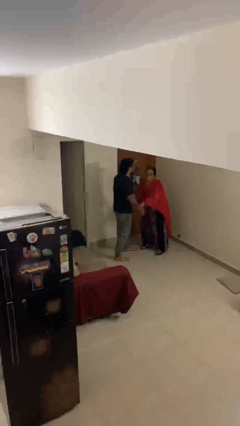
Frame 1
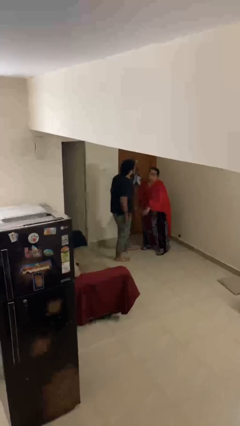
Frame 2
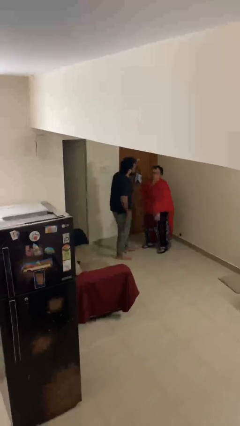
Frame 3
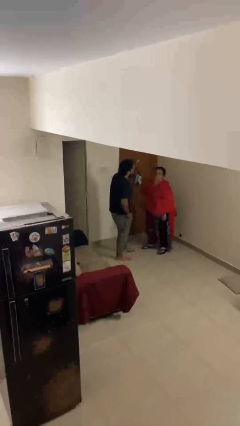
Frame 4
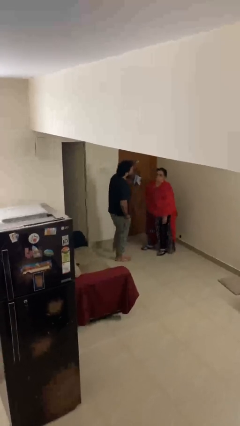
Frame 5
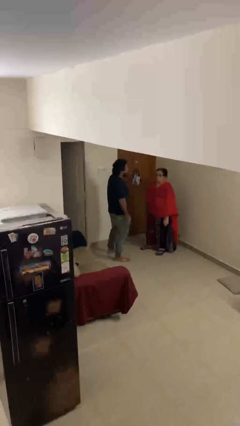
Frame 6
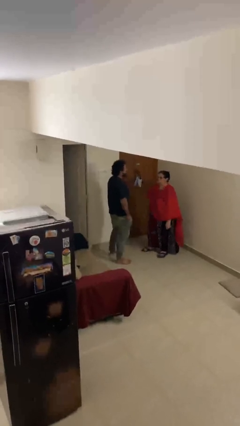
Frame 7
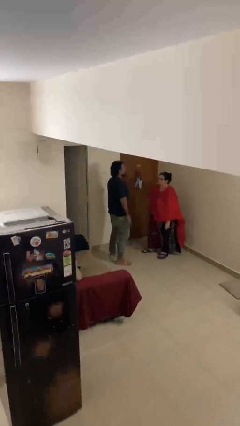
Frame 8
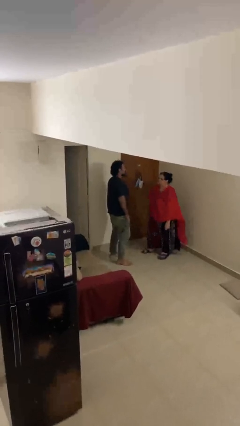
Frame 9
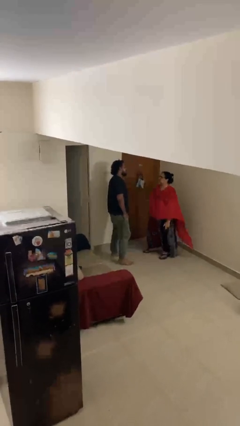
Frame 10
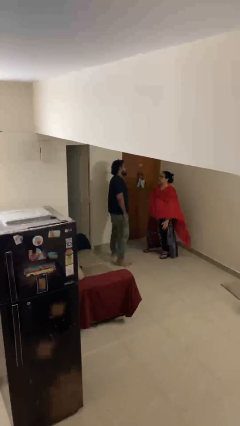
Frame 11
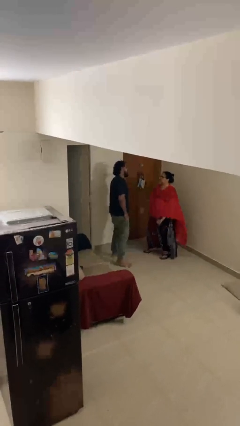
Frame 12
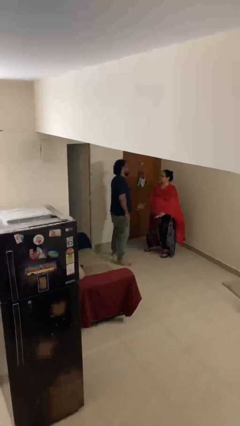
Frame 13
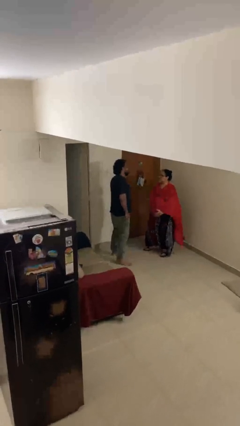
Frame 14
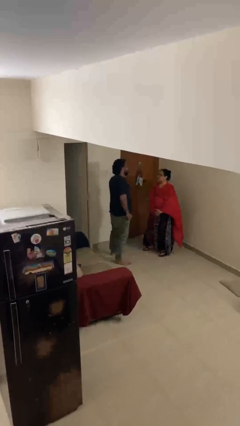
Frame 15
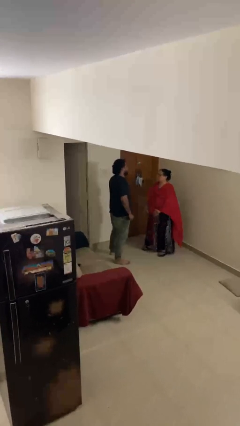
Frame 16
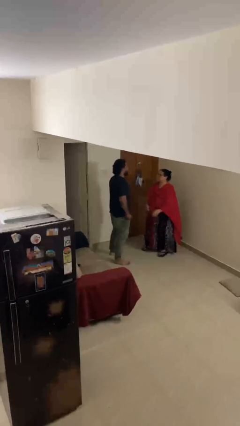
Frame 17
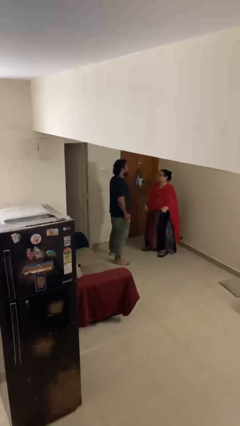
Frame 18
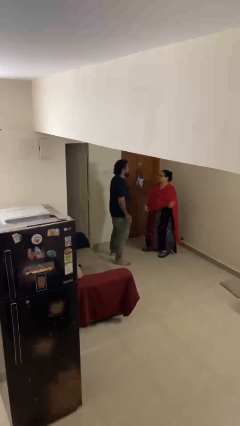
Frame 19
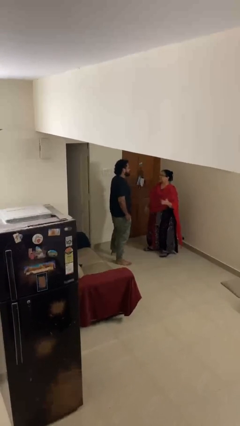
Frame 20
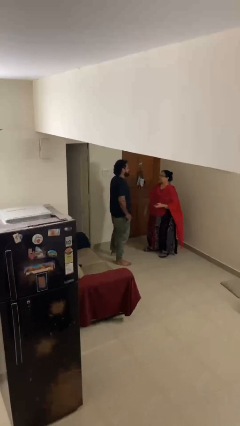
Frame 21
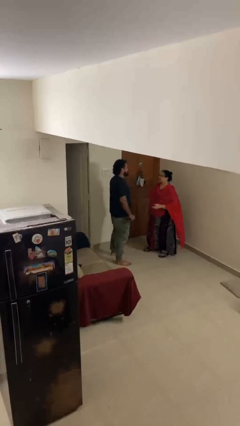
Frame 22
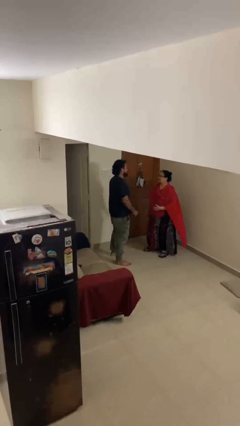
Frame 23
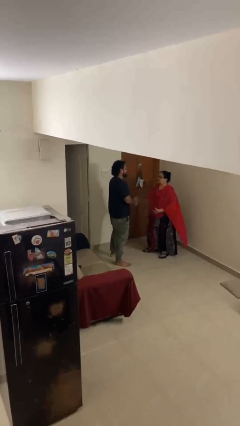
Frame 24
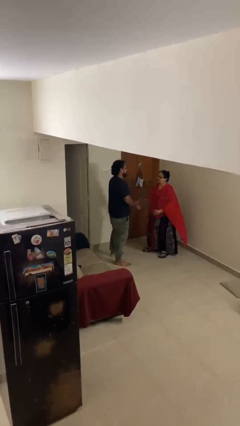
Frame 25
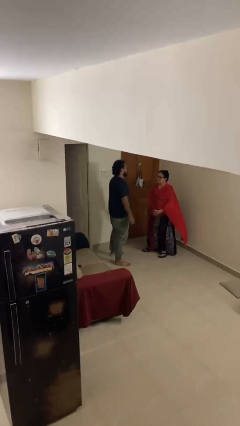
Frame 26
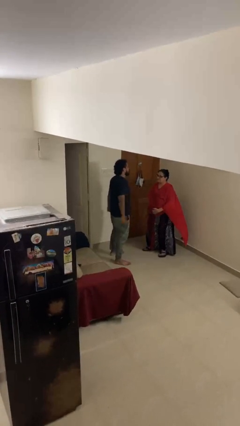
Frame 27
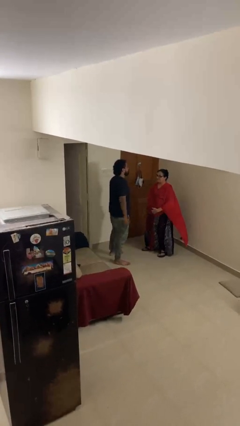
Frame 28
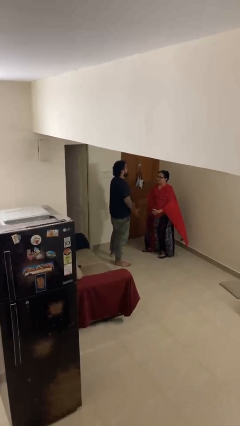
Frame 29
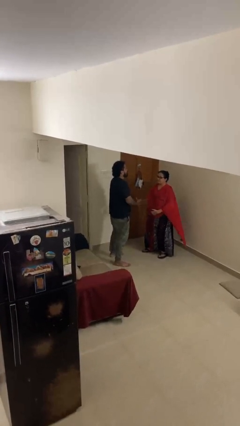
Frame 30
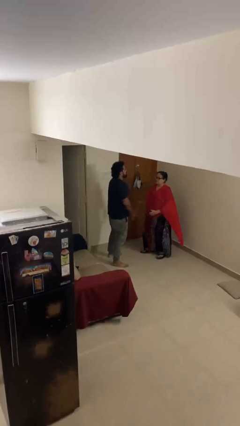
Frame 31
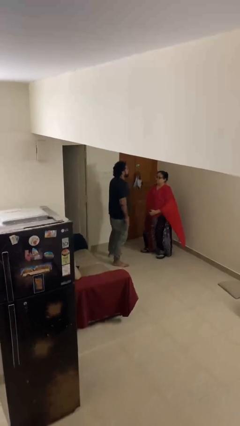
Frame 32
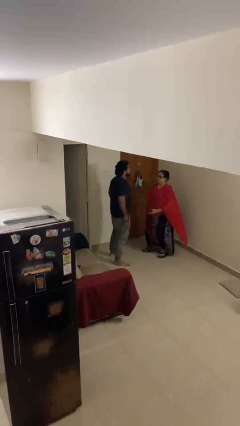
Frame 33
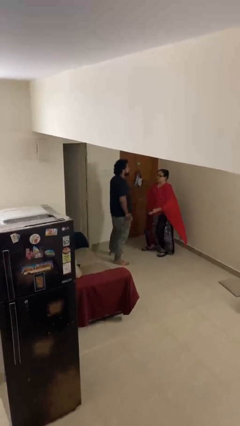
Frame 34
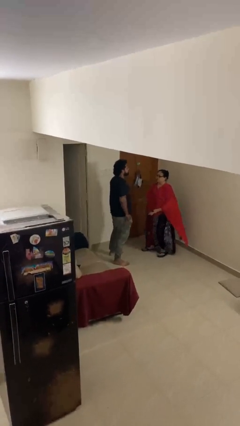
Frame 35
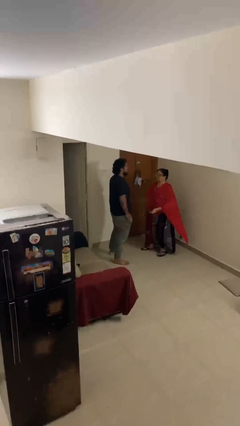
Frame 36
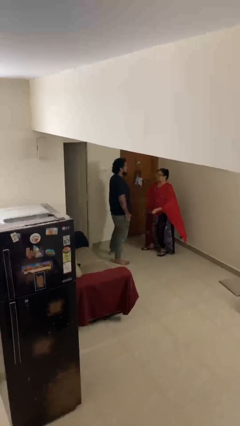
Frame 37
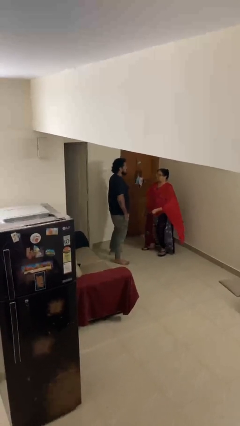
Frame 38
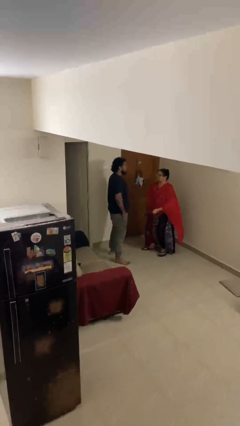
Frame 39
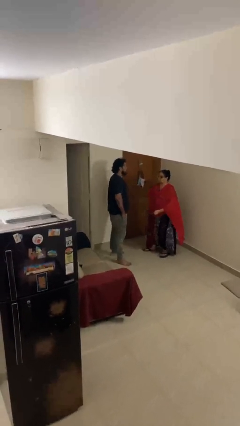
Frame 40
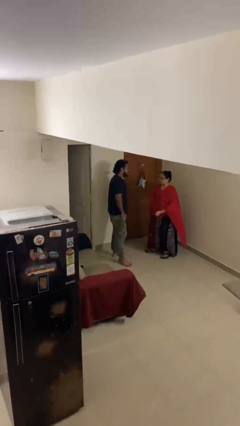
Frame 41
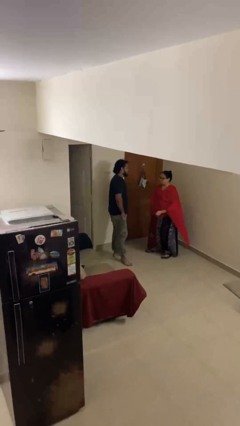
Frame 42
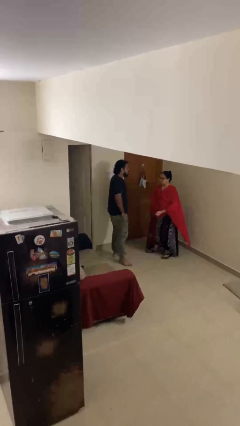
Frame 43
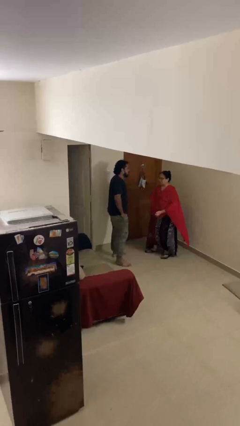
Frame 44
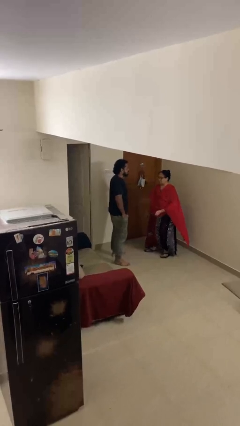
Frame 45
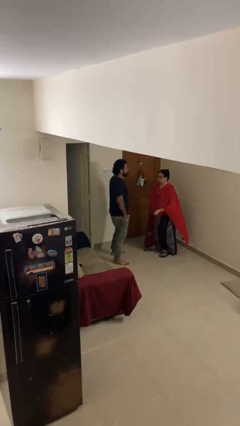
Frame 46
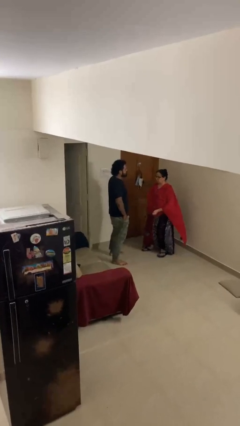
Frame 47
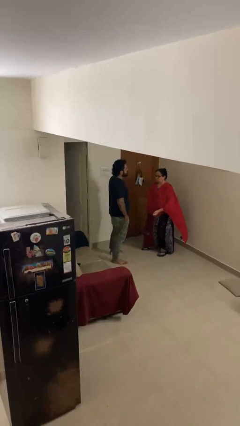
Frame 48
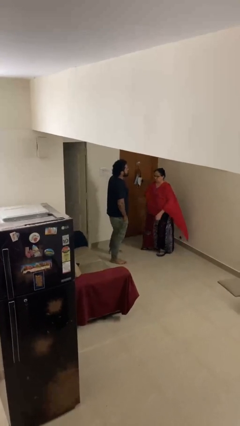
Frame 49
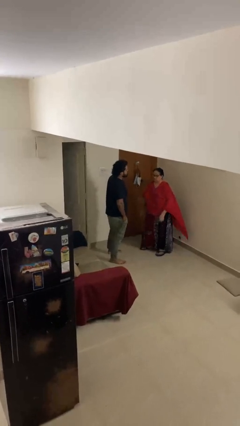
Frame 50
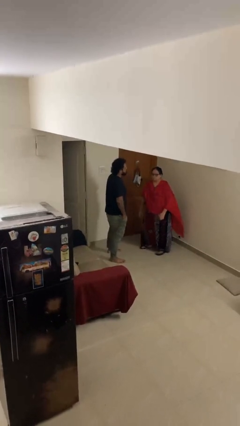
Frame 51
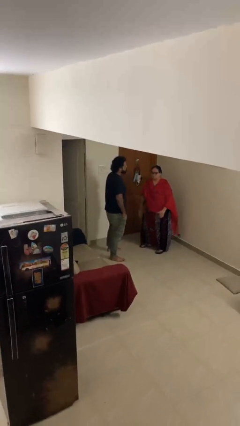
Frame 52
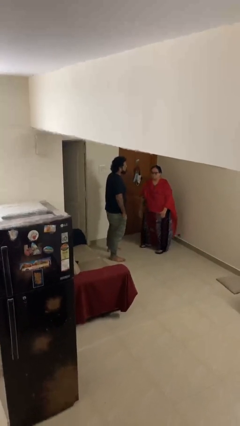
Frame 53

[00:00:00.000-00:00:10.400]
person talks to person

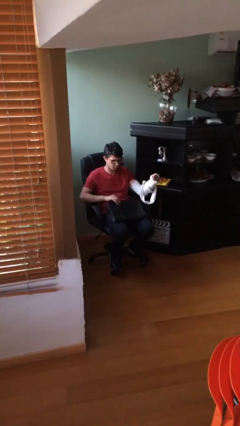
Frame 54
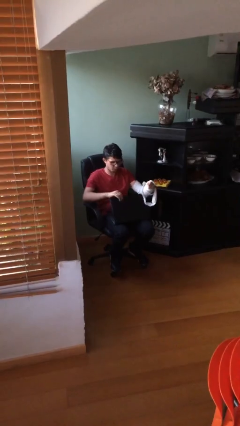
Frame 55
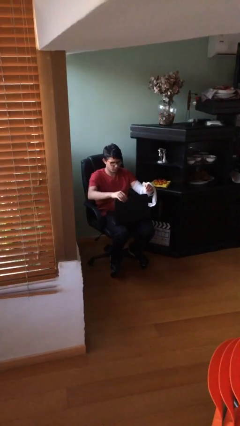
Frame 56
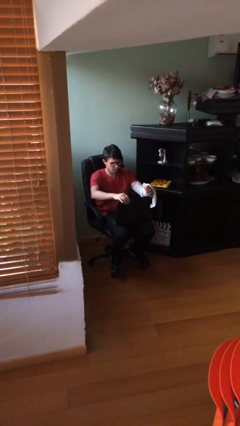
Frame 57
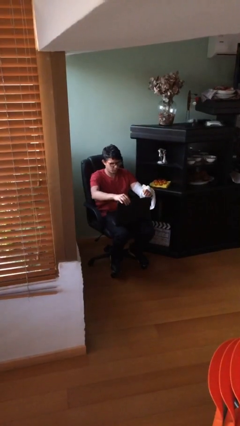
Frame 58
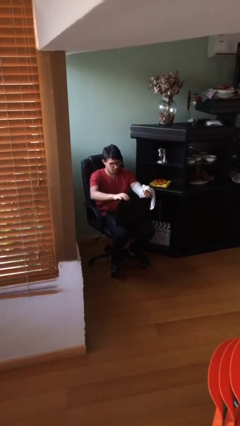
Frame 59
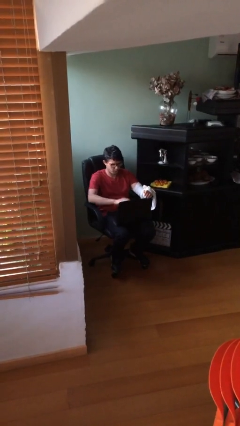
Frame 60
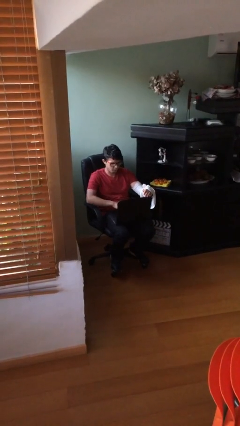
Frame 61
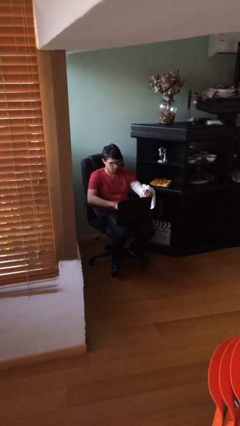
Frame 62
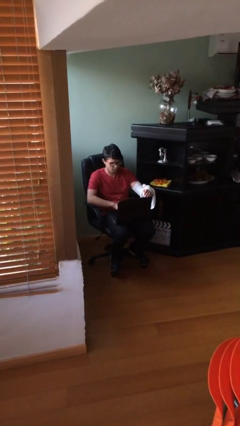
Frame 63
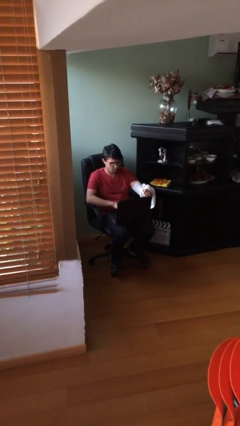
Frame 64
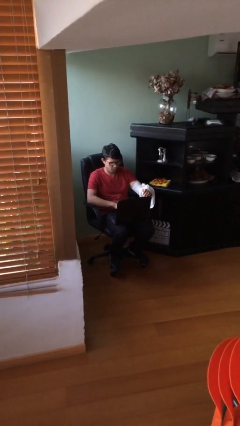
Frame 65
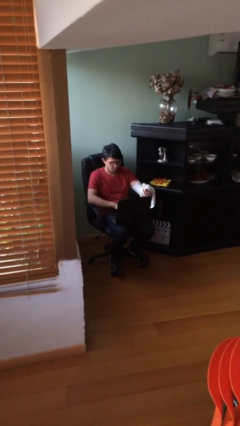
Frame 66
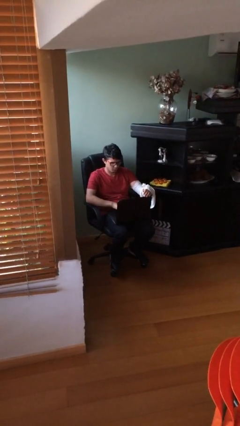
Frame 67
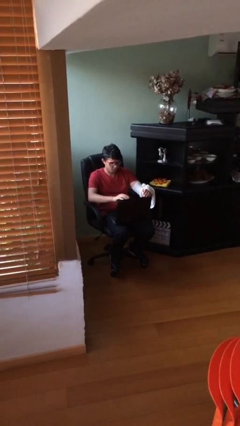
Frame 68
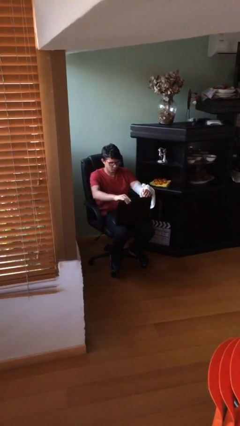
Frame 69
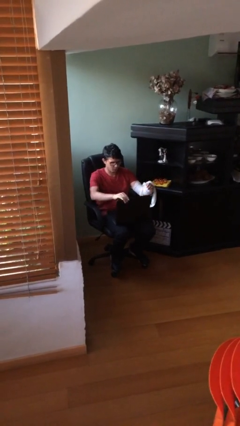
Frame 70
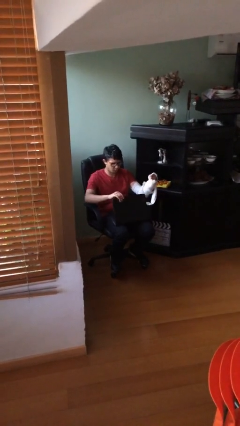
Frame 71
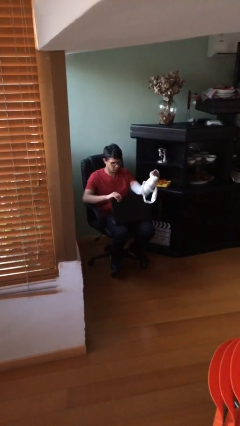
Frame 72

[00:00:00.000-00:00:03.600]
person interacts with laptop

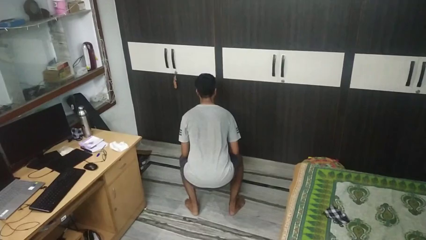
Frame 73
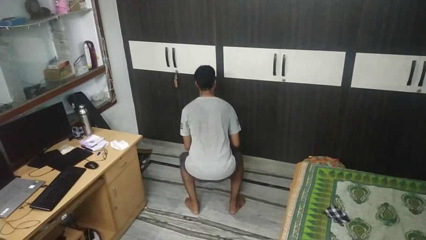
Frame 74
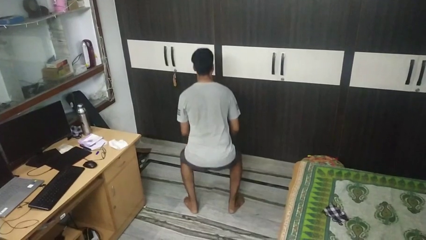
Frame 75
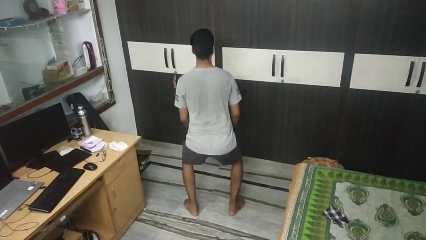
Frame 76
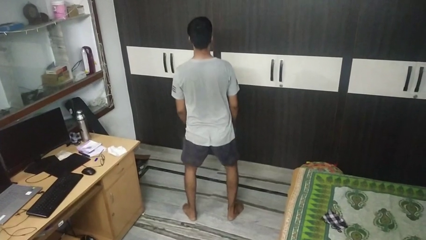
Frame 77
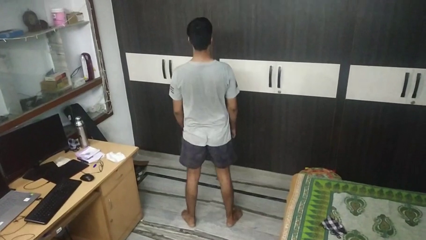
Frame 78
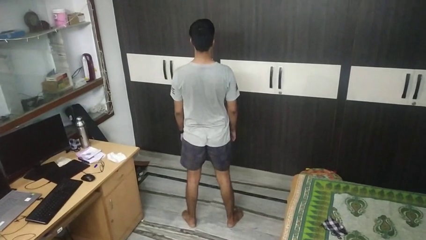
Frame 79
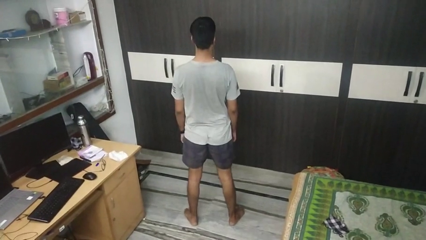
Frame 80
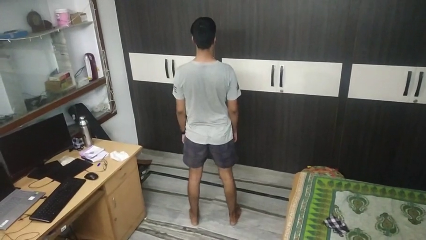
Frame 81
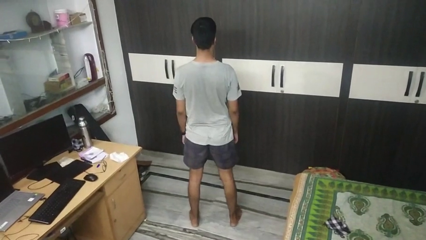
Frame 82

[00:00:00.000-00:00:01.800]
person stands up

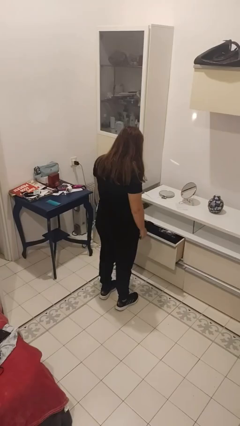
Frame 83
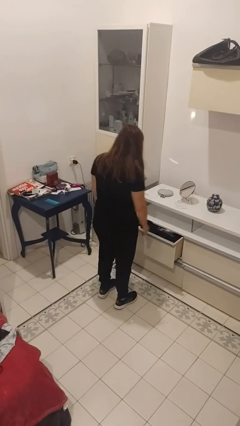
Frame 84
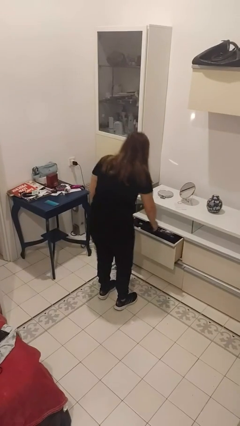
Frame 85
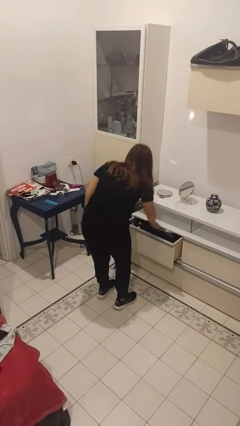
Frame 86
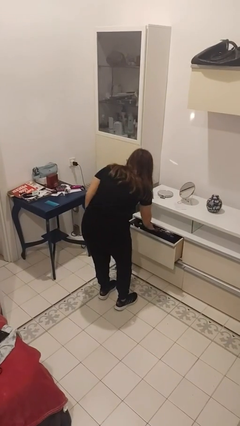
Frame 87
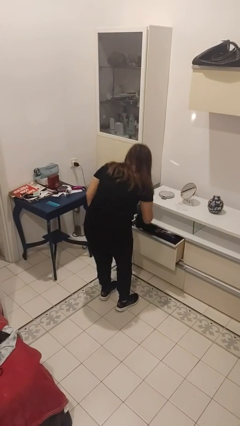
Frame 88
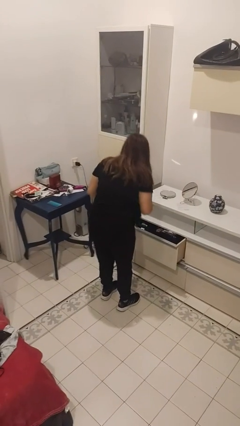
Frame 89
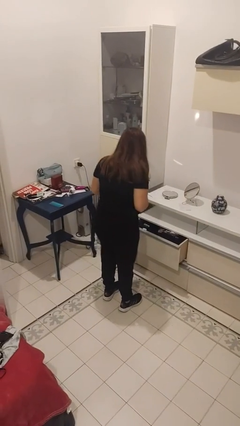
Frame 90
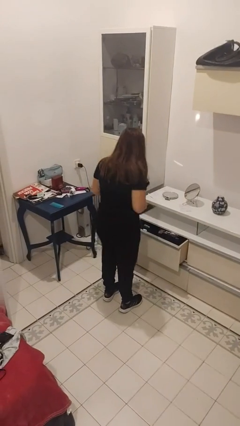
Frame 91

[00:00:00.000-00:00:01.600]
person takes clothes from dresser

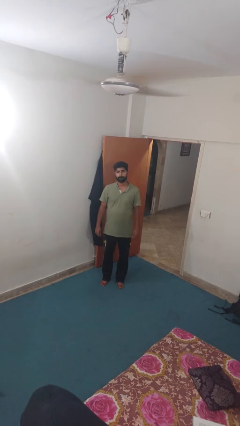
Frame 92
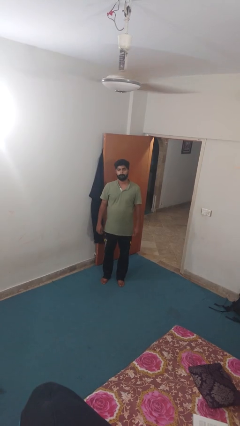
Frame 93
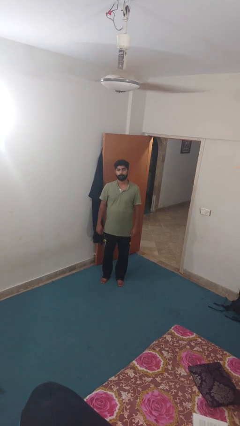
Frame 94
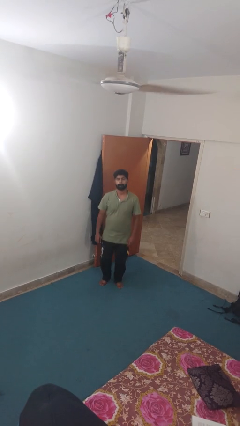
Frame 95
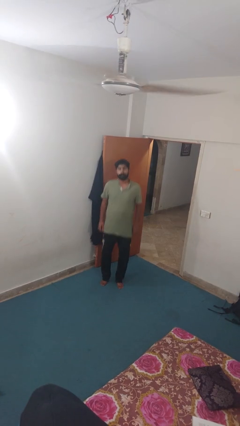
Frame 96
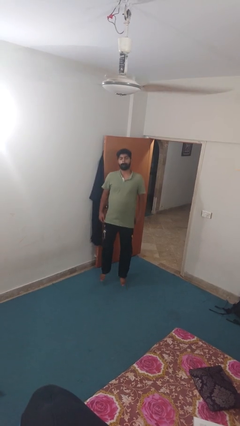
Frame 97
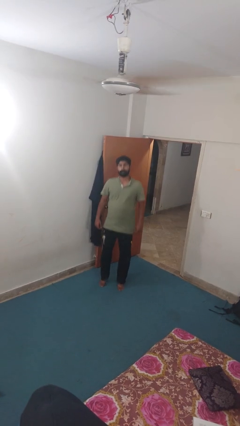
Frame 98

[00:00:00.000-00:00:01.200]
person jumps
